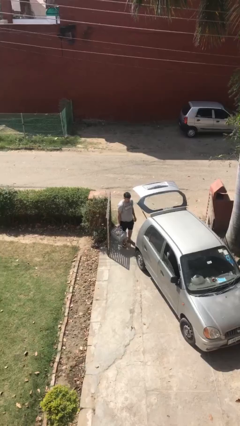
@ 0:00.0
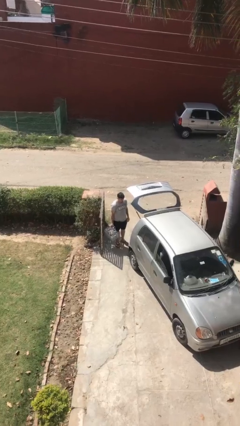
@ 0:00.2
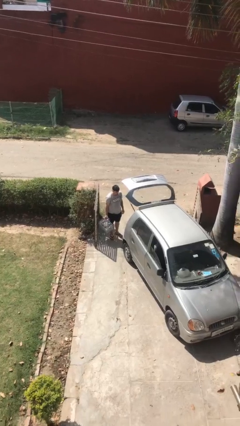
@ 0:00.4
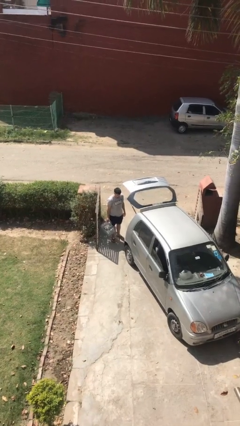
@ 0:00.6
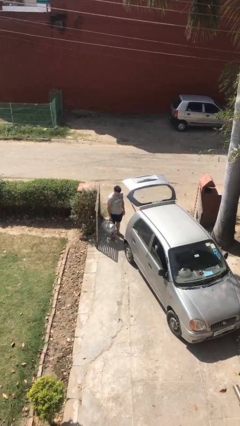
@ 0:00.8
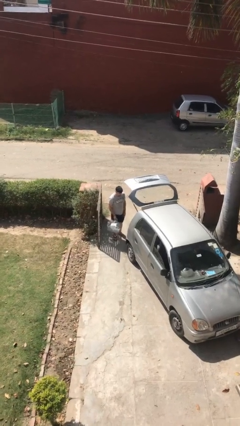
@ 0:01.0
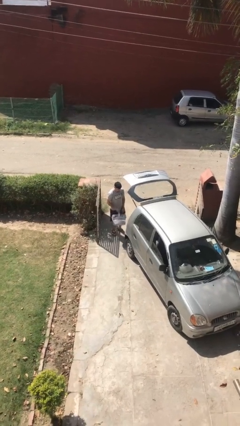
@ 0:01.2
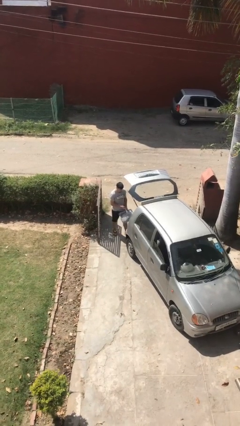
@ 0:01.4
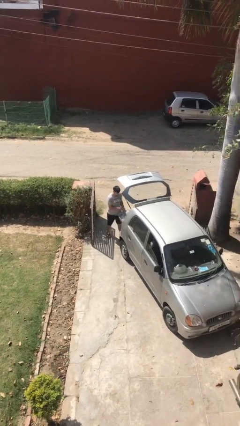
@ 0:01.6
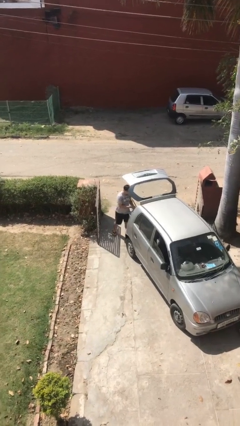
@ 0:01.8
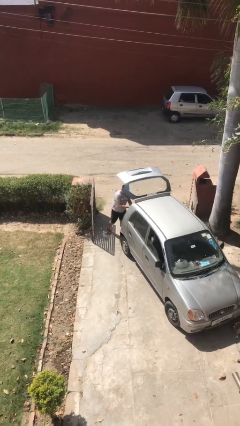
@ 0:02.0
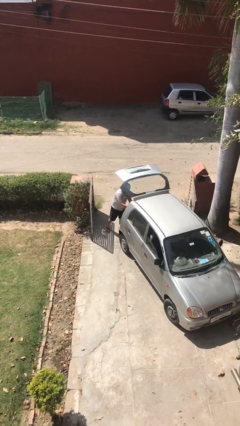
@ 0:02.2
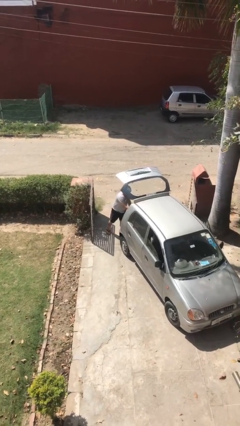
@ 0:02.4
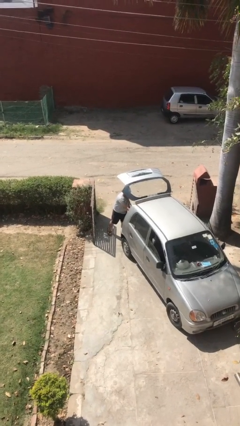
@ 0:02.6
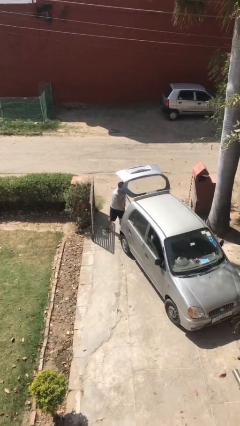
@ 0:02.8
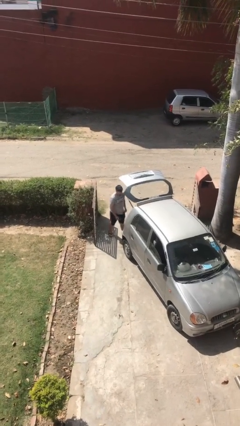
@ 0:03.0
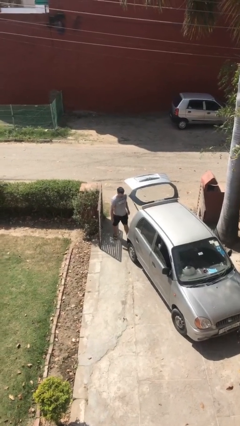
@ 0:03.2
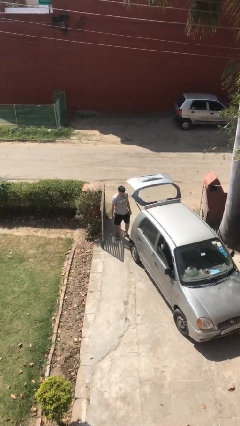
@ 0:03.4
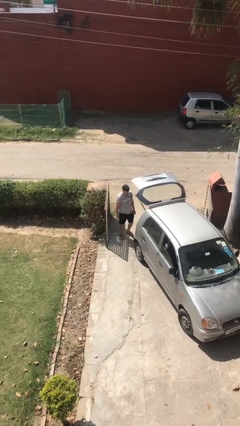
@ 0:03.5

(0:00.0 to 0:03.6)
person loads car

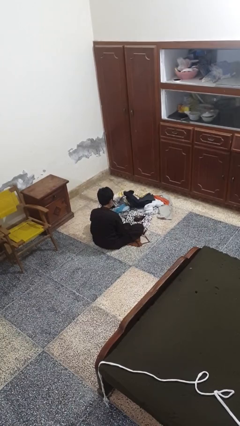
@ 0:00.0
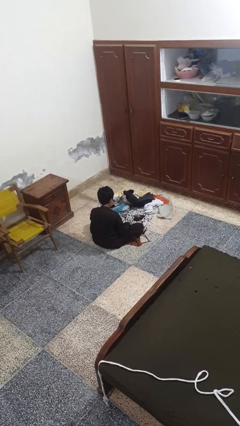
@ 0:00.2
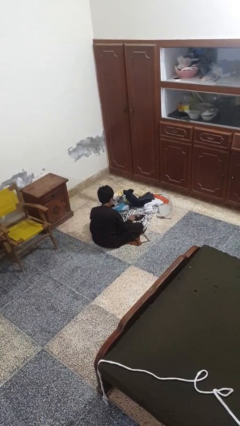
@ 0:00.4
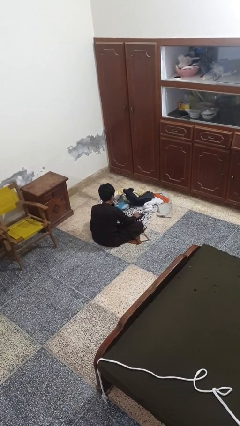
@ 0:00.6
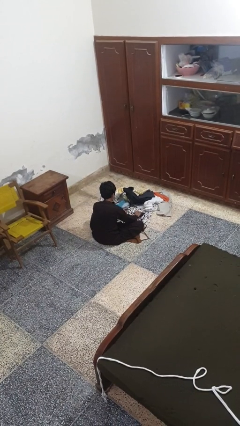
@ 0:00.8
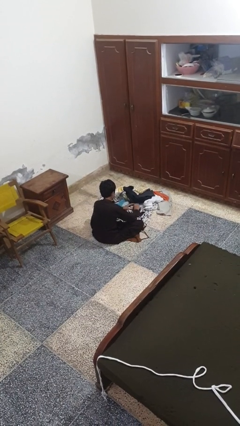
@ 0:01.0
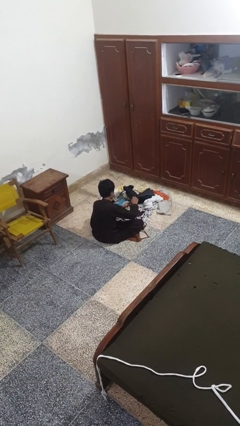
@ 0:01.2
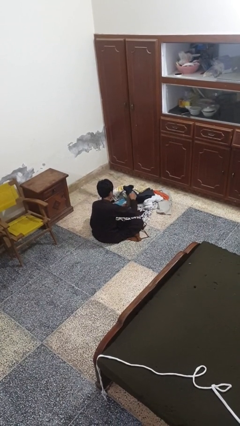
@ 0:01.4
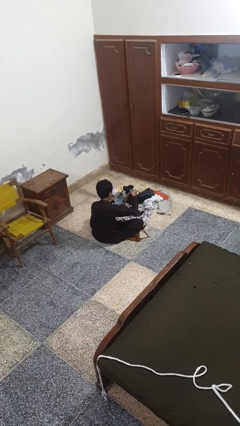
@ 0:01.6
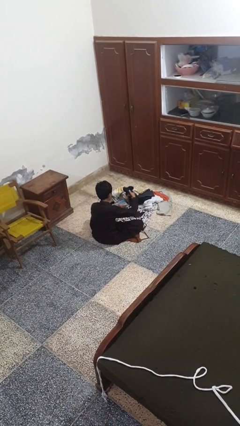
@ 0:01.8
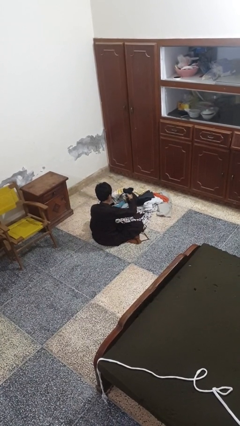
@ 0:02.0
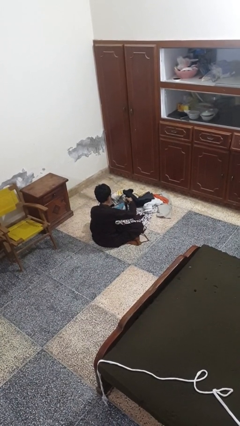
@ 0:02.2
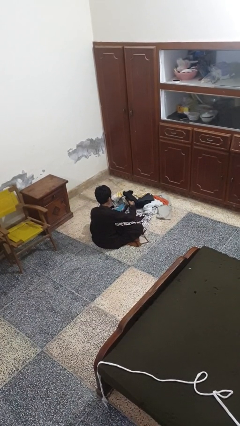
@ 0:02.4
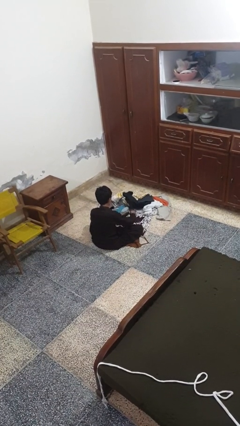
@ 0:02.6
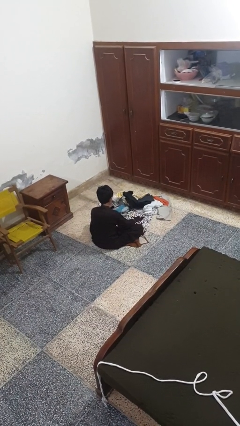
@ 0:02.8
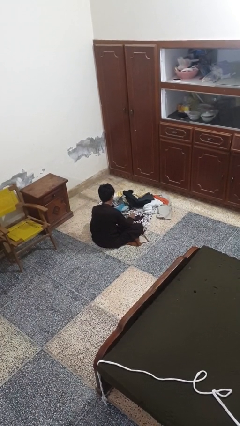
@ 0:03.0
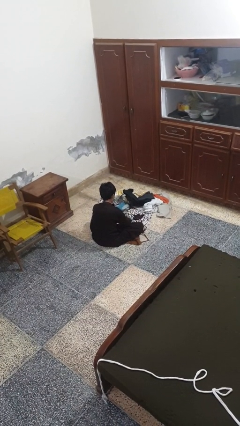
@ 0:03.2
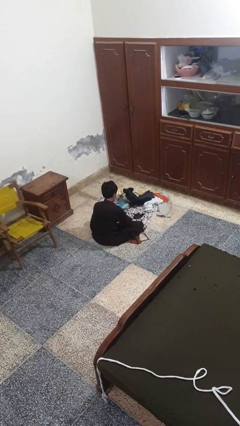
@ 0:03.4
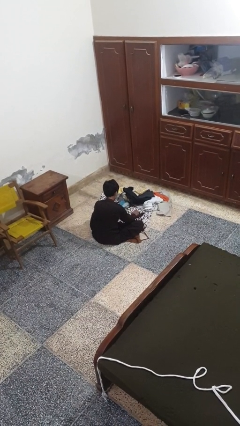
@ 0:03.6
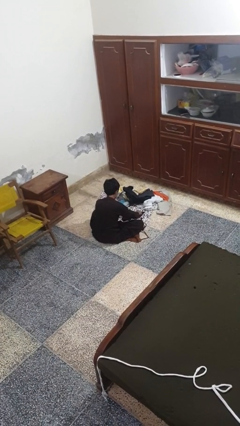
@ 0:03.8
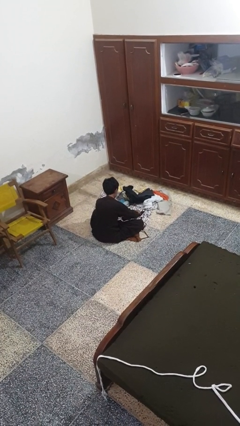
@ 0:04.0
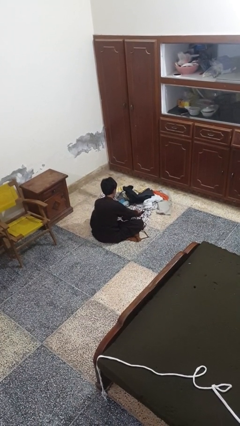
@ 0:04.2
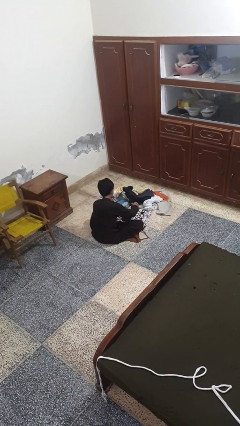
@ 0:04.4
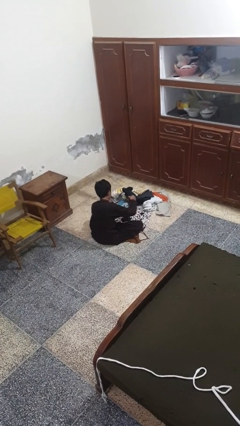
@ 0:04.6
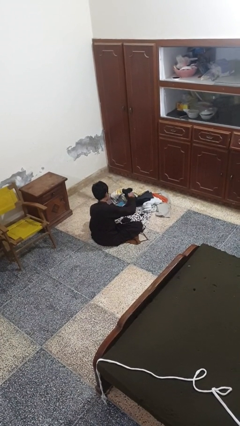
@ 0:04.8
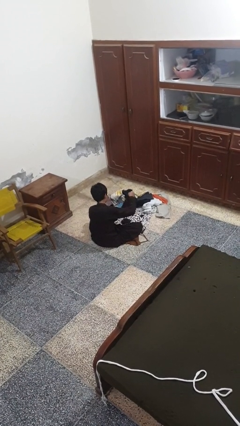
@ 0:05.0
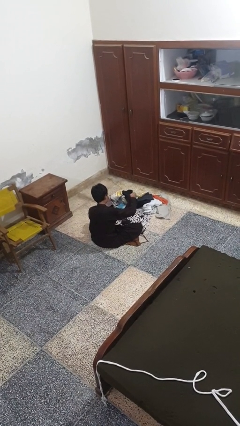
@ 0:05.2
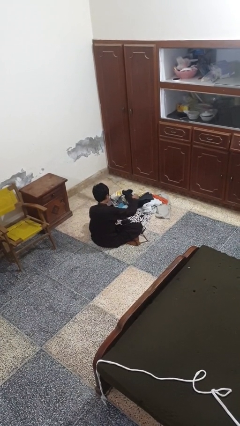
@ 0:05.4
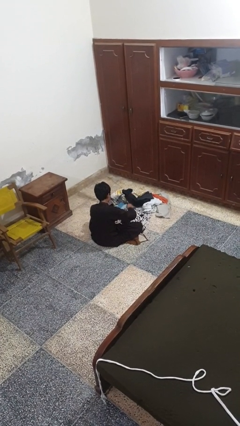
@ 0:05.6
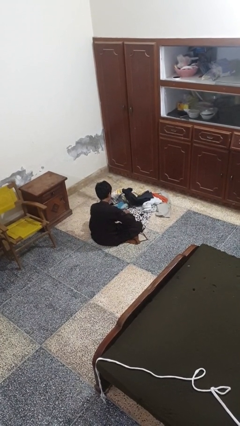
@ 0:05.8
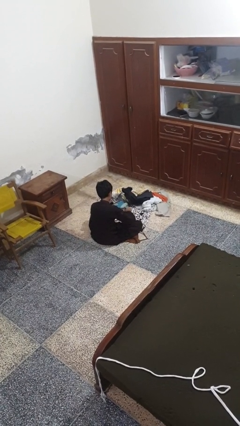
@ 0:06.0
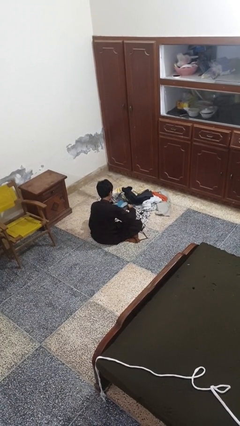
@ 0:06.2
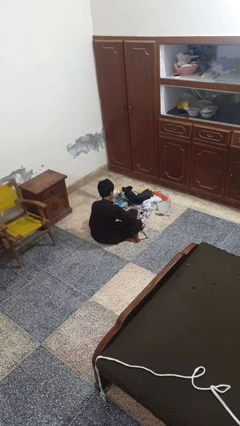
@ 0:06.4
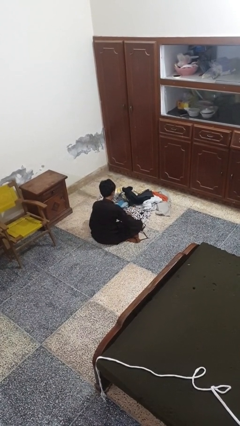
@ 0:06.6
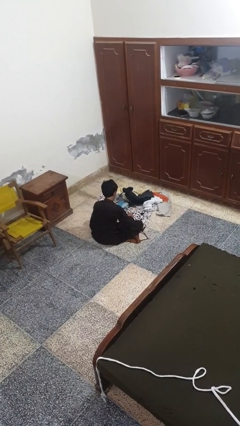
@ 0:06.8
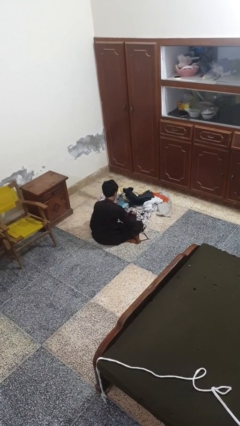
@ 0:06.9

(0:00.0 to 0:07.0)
person folds socks

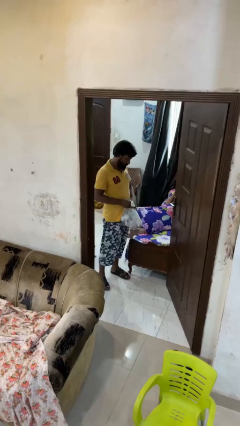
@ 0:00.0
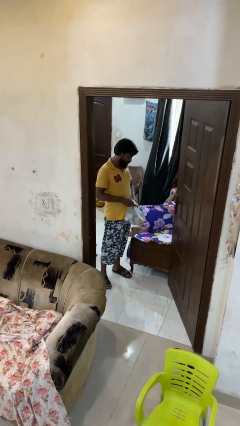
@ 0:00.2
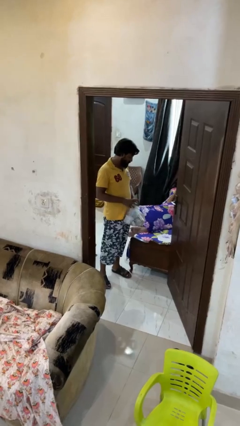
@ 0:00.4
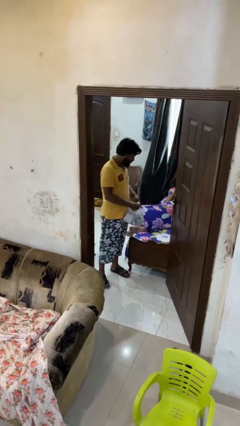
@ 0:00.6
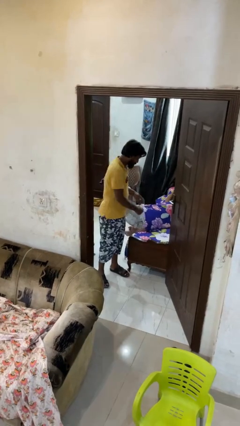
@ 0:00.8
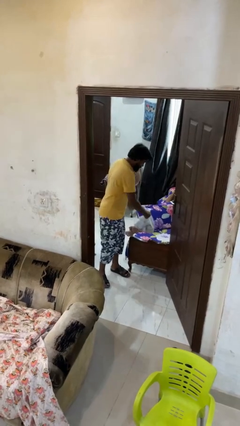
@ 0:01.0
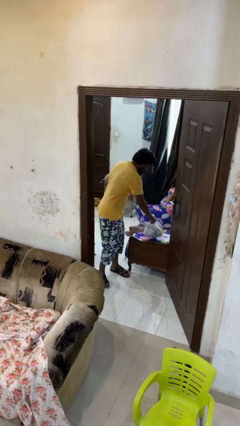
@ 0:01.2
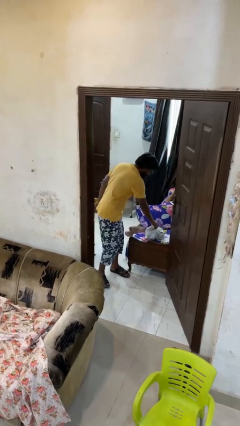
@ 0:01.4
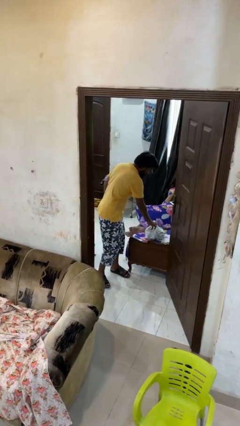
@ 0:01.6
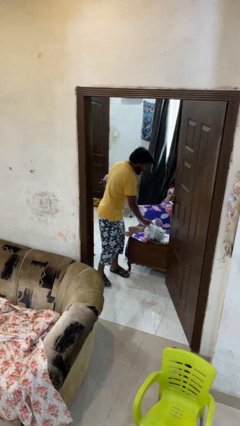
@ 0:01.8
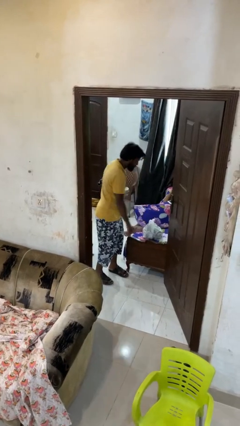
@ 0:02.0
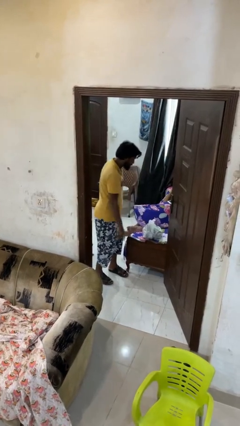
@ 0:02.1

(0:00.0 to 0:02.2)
person puts down object on bed

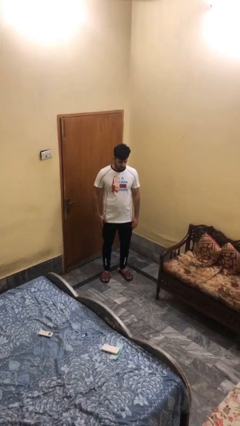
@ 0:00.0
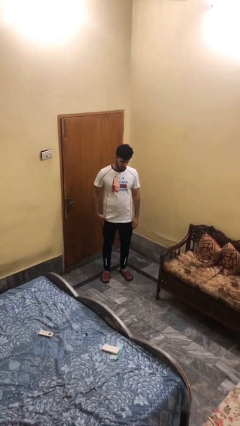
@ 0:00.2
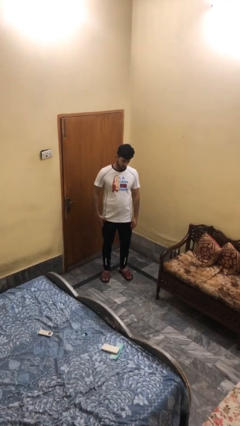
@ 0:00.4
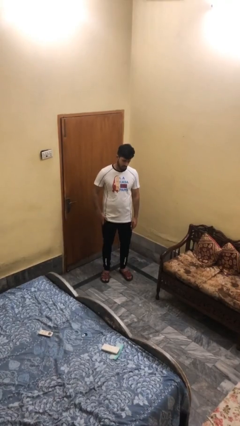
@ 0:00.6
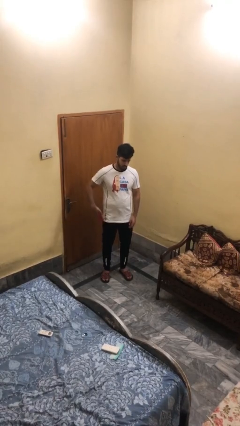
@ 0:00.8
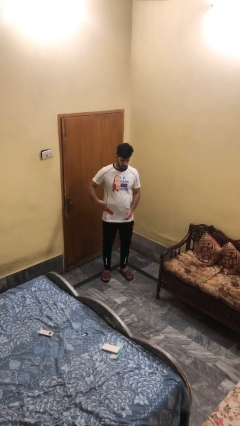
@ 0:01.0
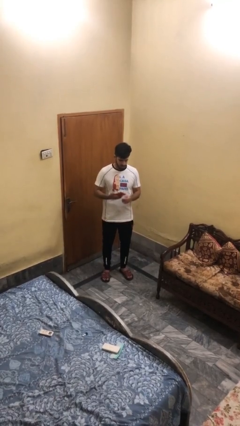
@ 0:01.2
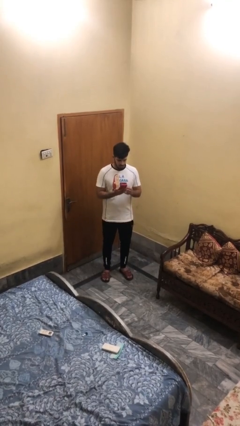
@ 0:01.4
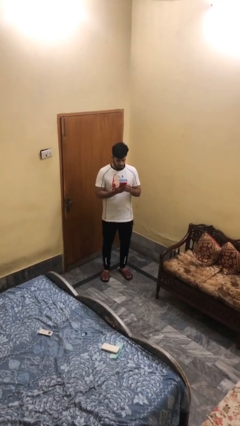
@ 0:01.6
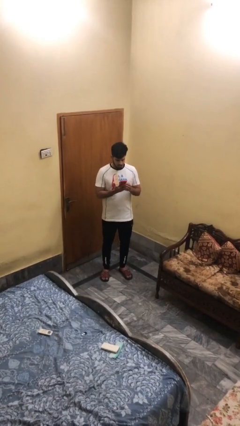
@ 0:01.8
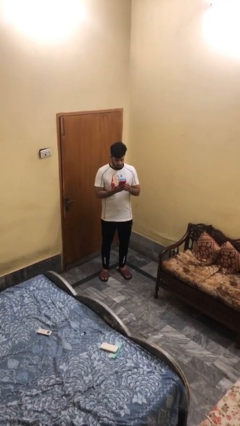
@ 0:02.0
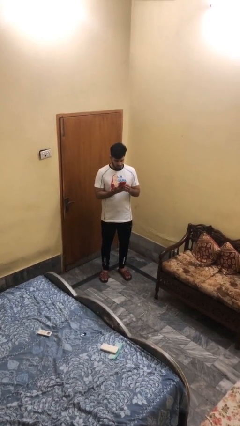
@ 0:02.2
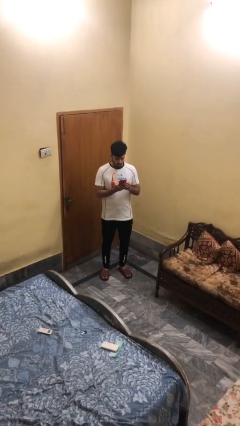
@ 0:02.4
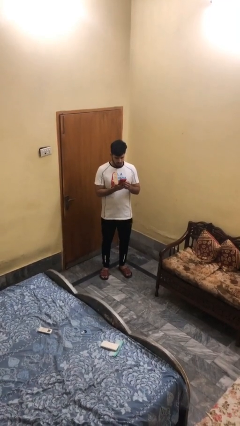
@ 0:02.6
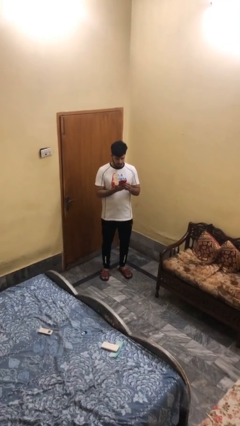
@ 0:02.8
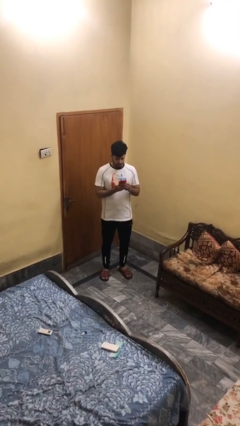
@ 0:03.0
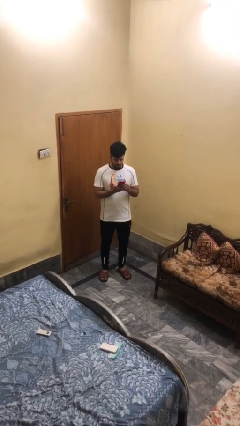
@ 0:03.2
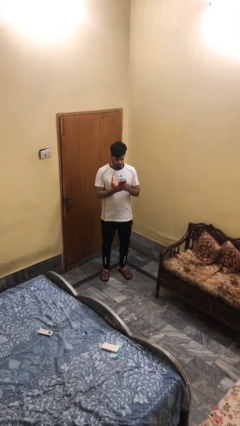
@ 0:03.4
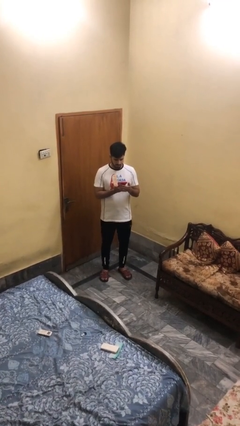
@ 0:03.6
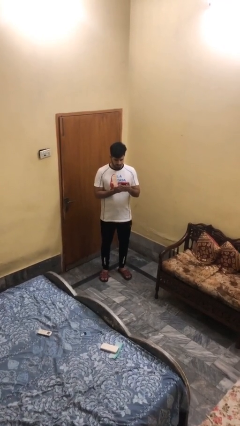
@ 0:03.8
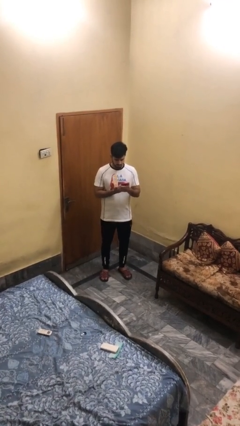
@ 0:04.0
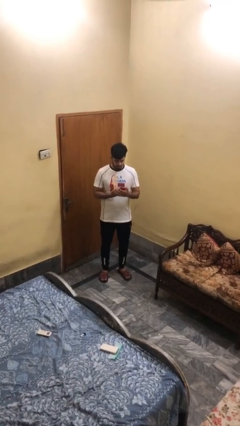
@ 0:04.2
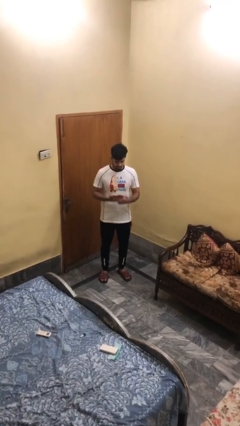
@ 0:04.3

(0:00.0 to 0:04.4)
person takes phone from pocket

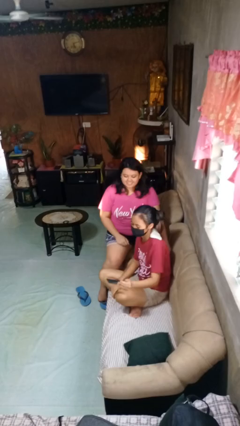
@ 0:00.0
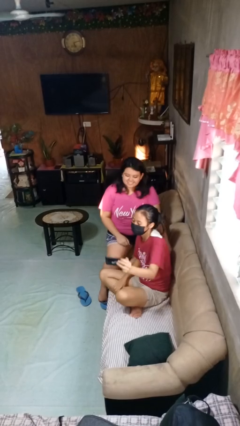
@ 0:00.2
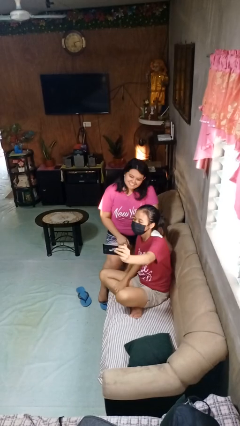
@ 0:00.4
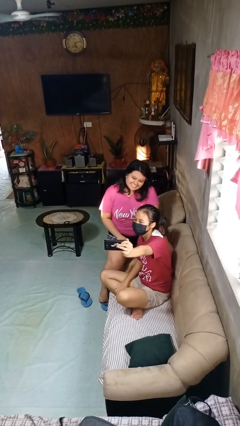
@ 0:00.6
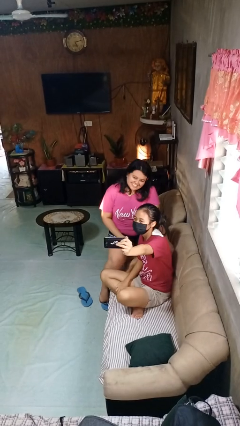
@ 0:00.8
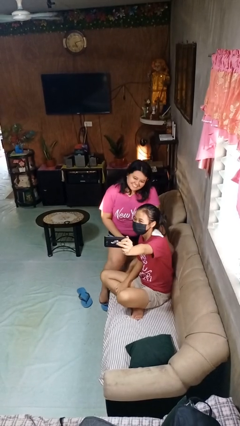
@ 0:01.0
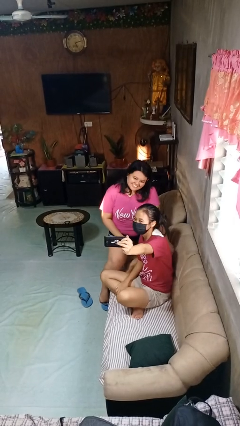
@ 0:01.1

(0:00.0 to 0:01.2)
person takes selfie with person
